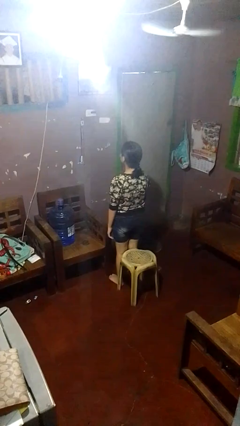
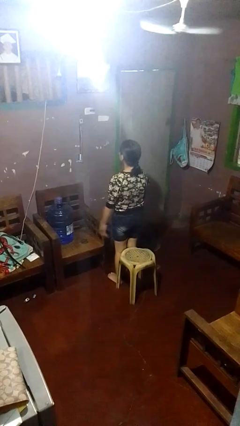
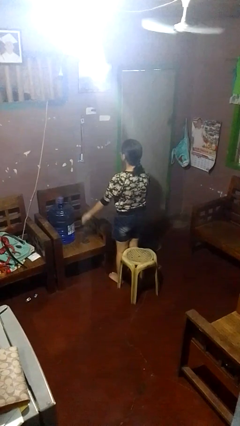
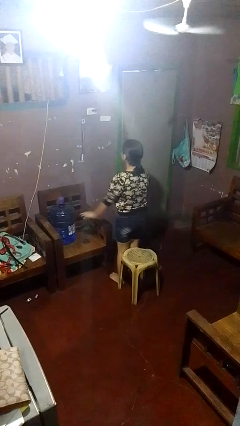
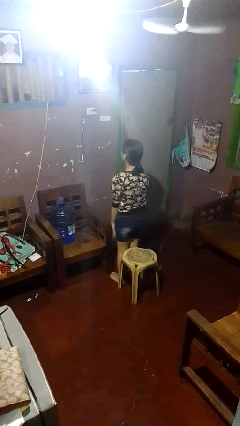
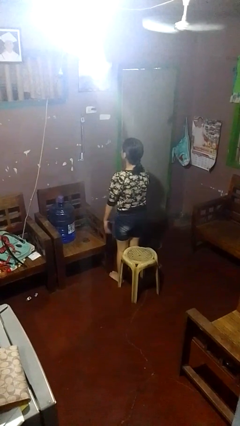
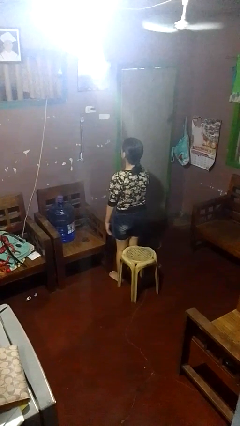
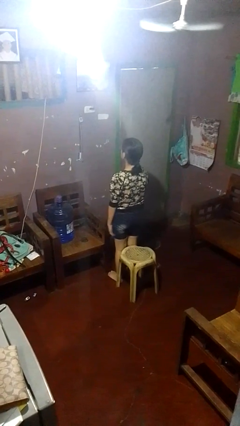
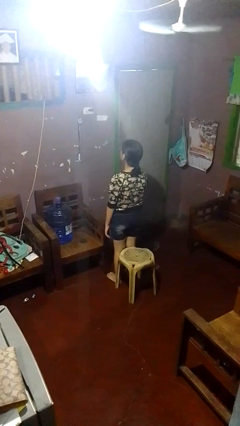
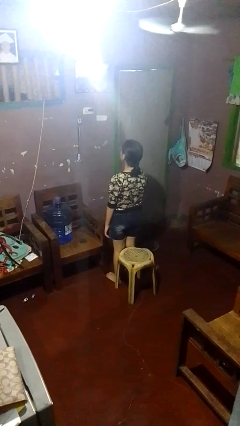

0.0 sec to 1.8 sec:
person slaps hands on thighs

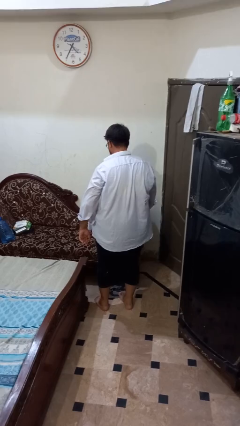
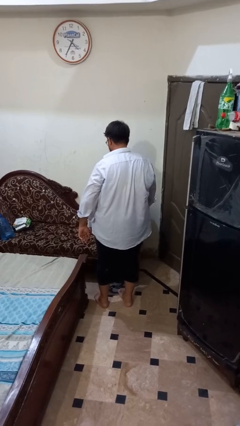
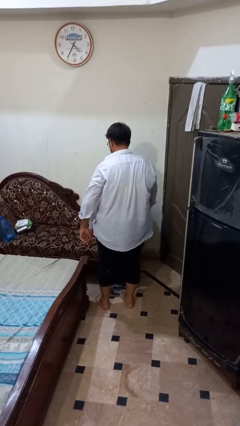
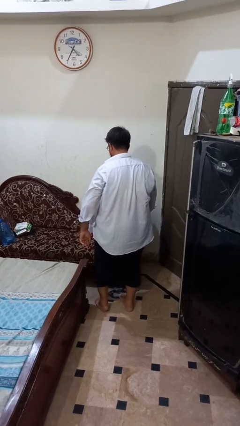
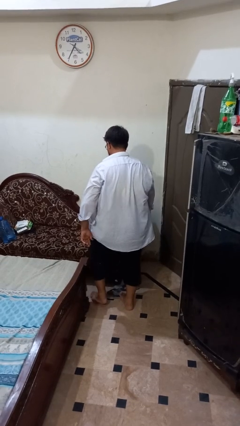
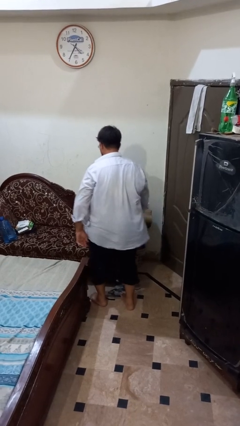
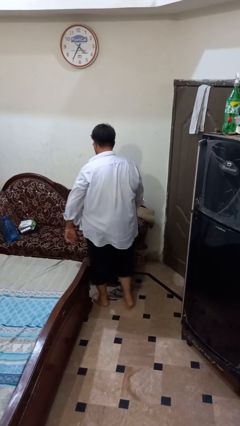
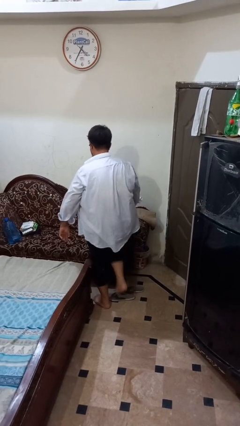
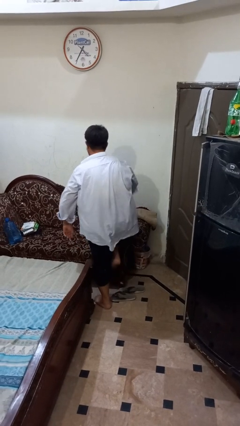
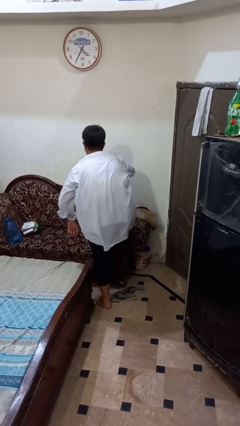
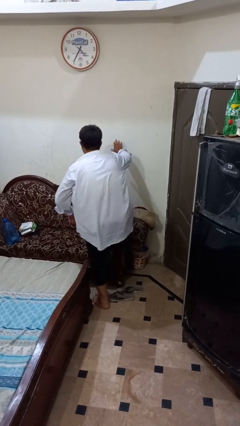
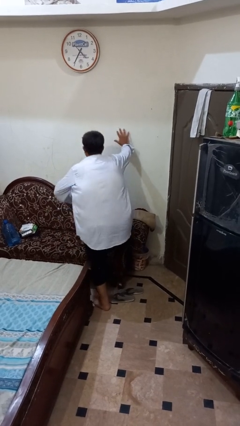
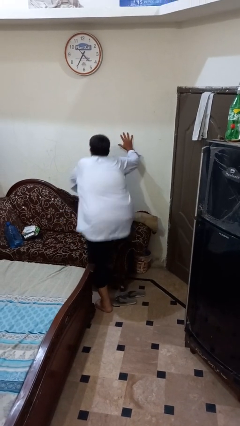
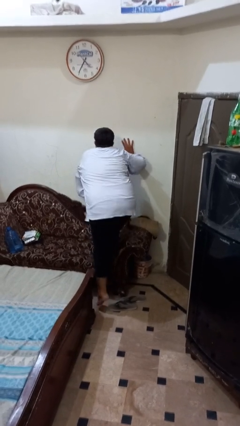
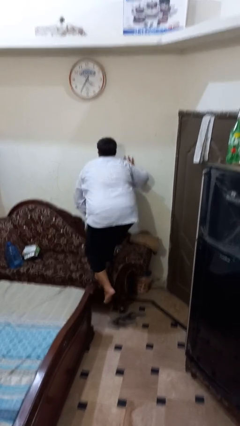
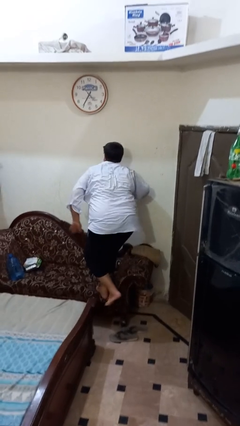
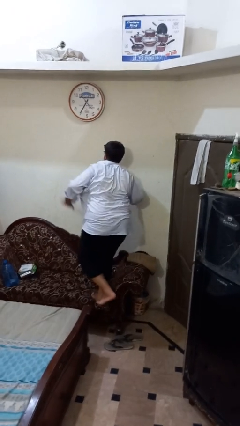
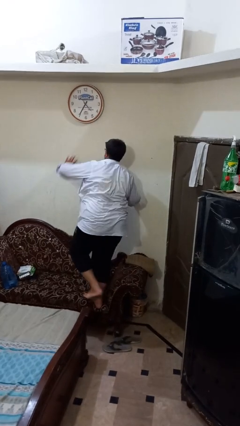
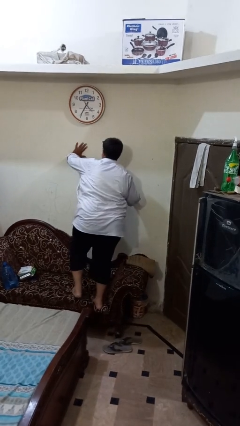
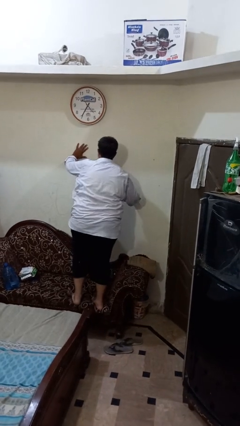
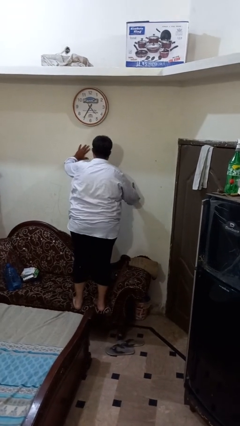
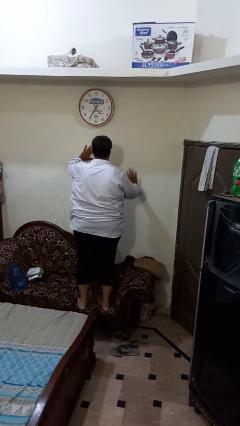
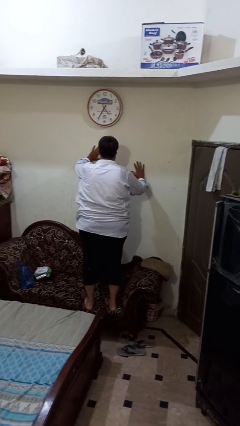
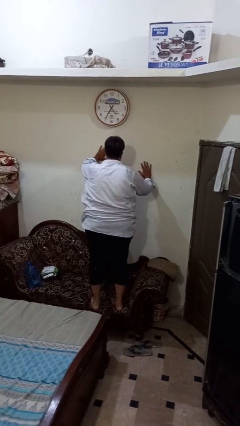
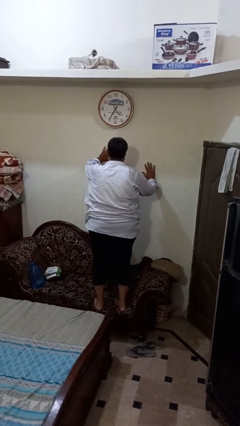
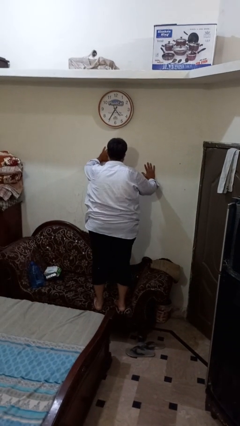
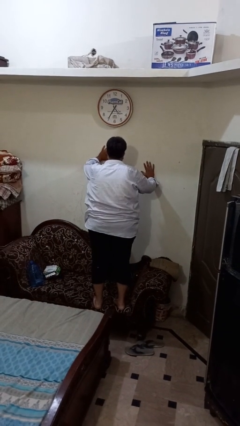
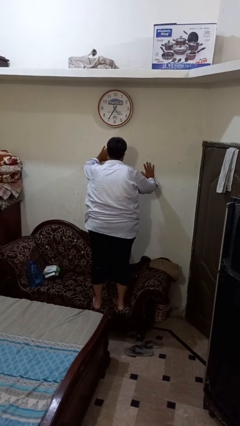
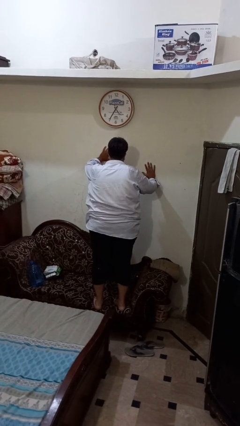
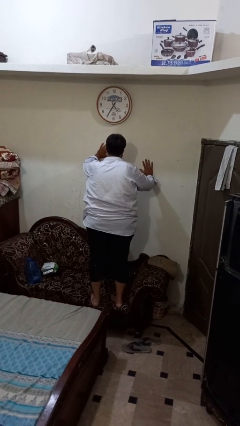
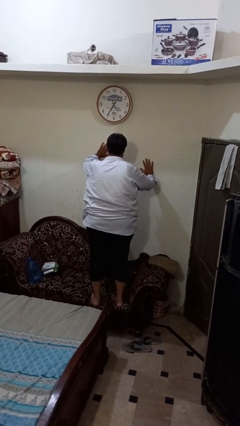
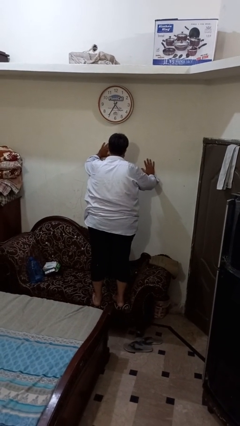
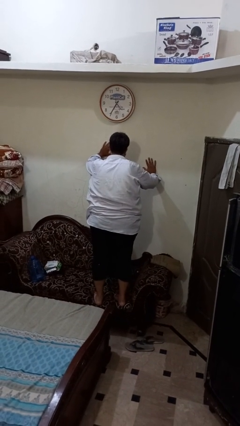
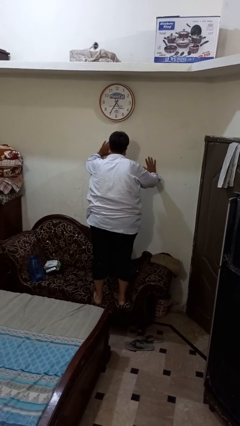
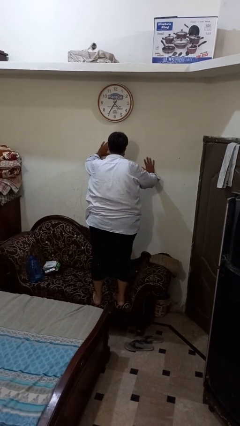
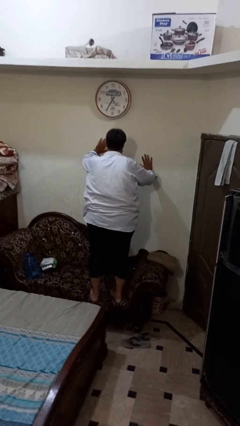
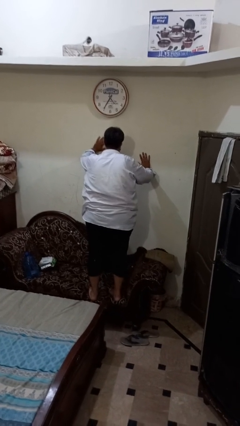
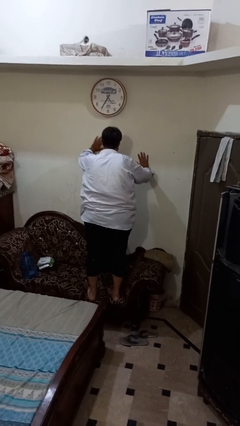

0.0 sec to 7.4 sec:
person climbs on couch

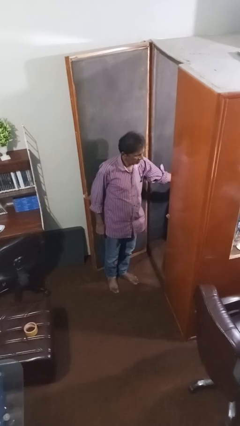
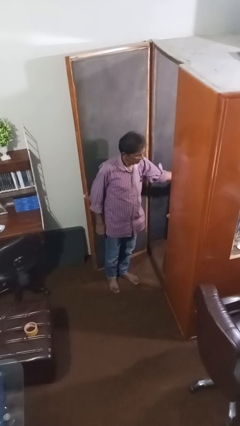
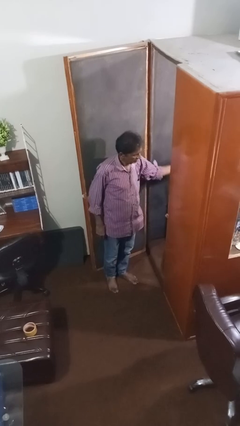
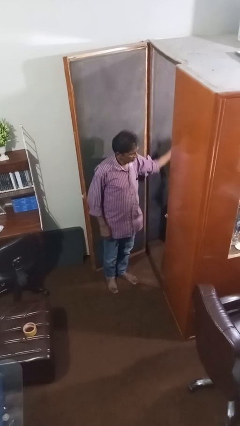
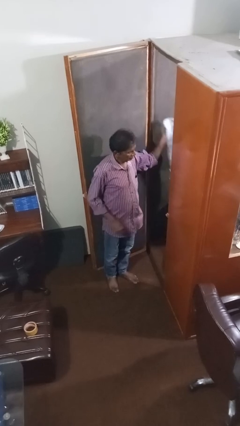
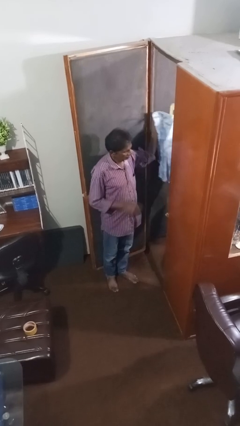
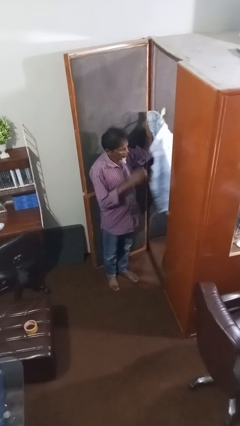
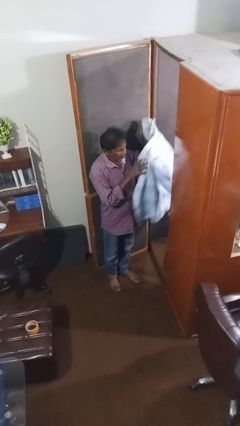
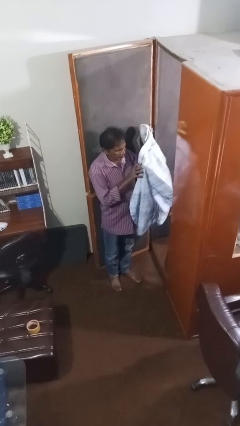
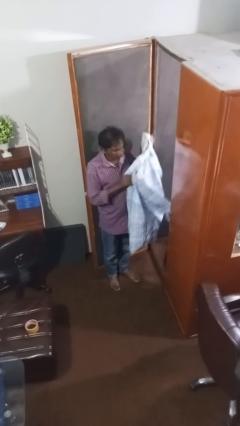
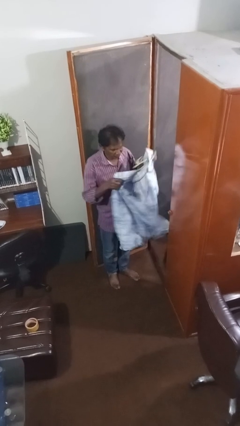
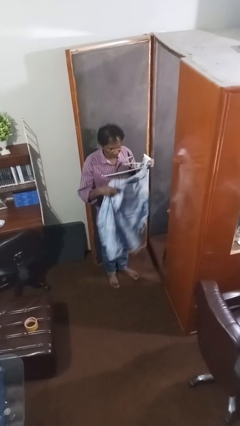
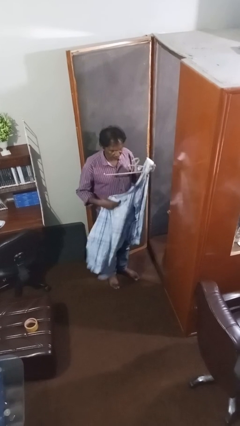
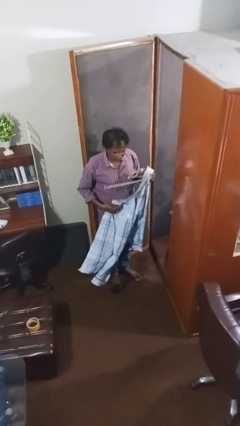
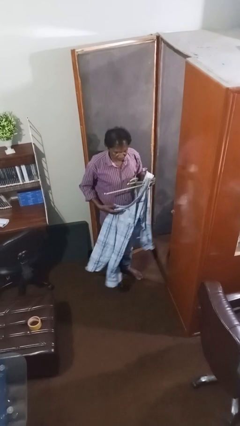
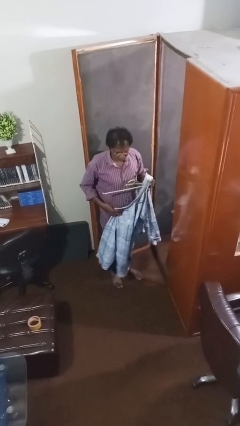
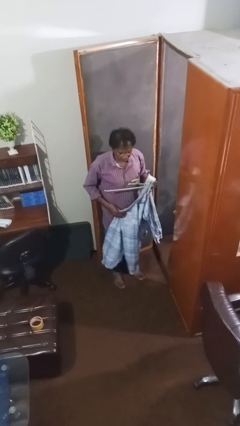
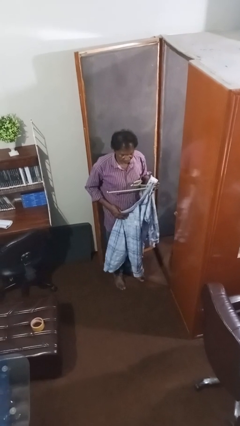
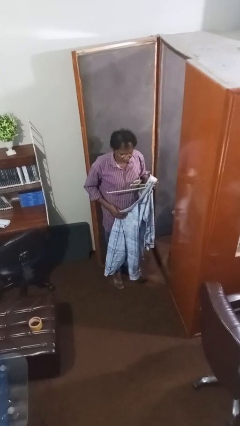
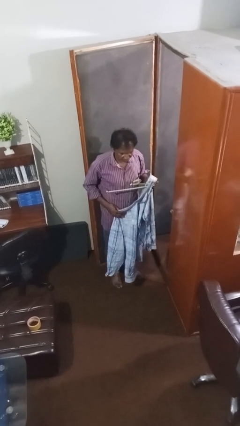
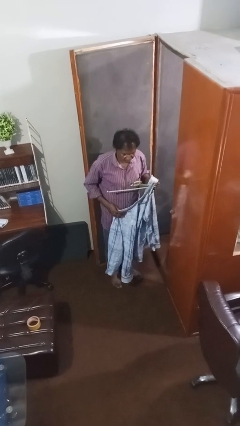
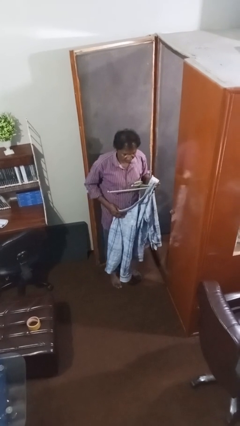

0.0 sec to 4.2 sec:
person takes clothes from closet

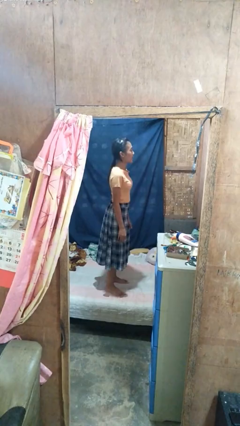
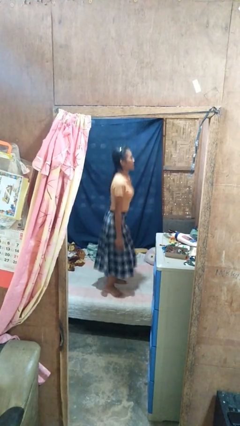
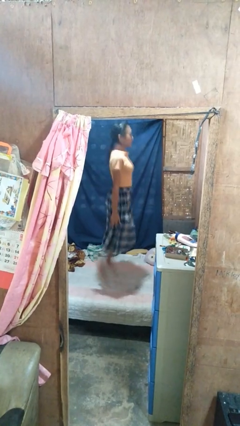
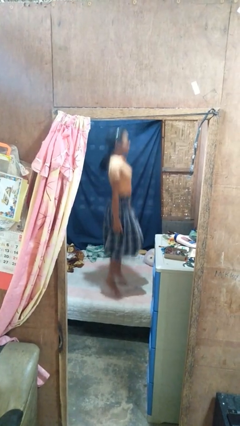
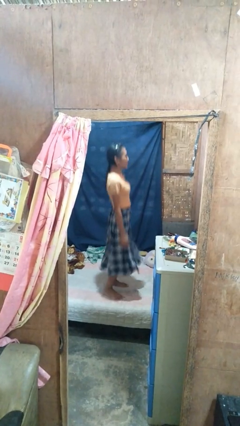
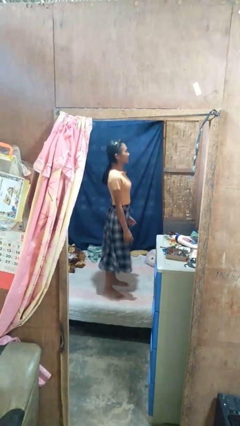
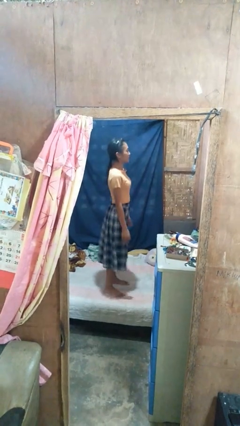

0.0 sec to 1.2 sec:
person jumps on bed

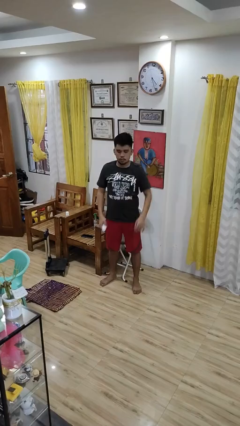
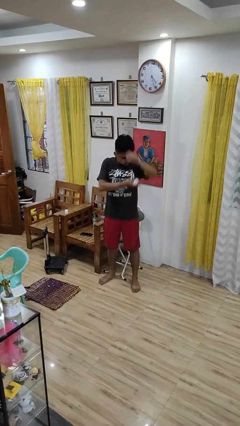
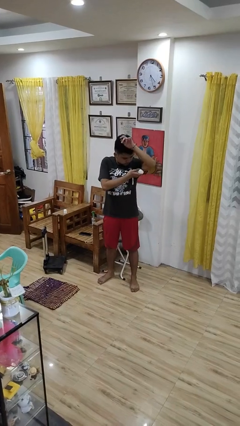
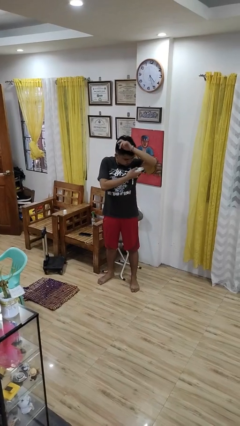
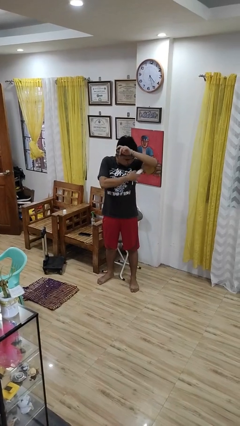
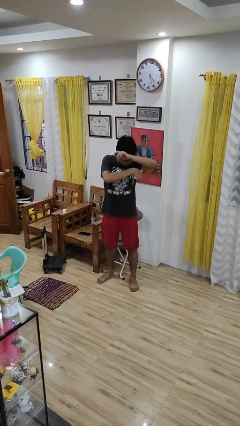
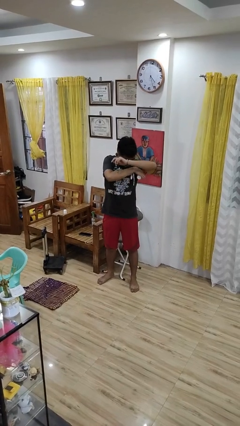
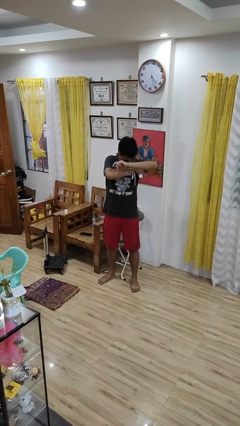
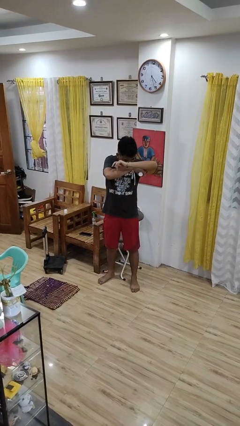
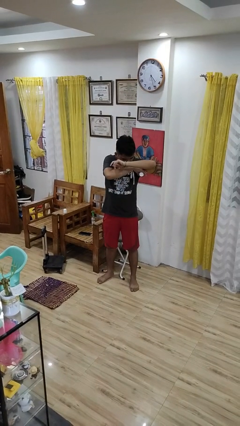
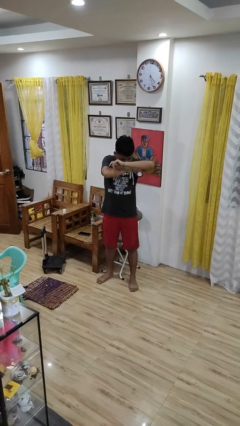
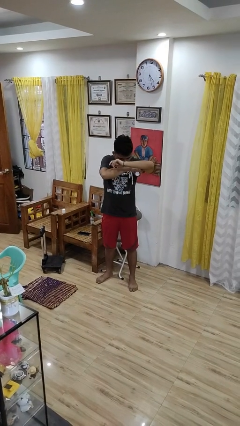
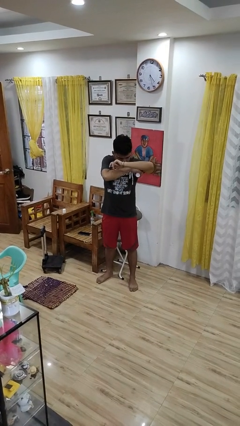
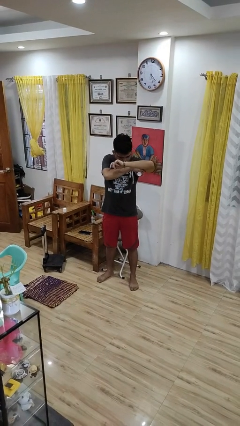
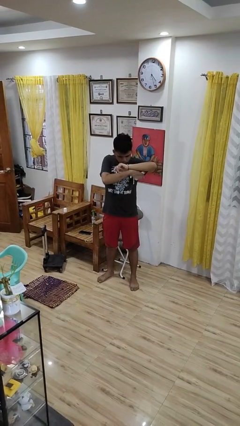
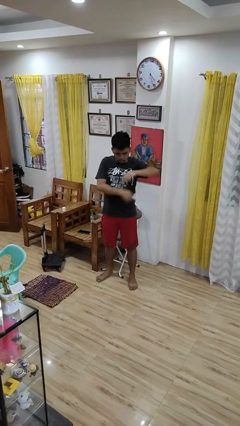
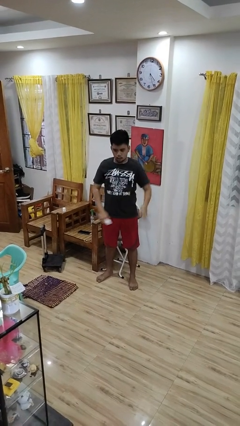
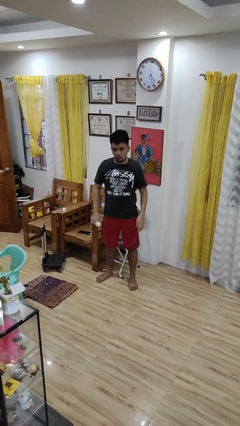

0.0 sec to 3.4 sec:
person applies deodorant
